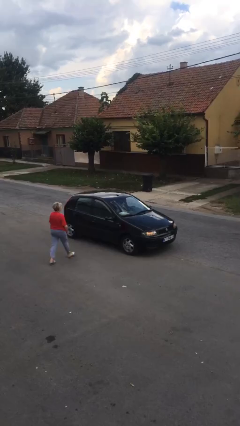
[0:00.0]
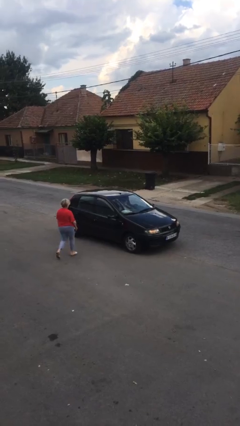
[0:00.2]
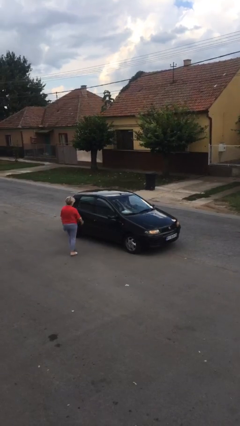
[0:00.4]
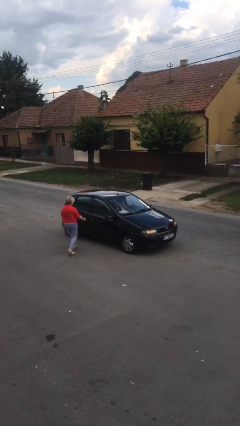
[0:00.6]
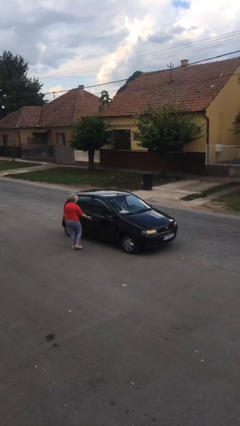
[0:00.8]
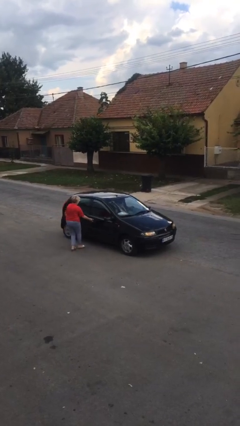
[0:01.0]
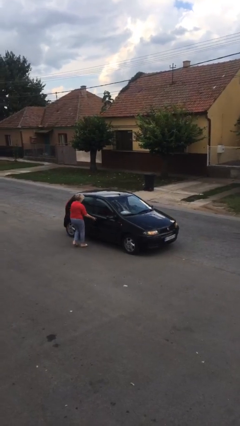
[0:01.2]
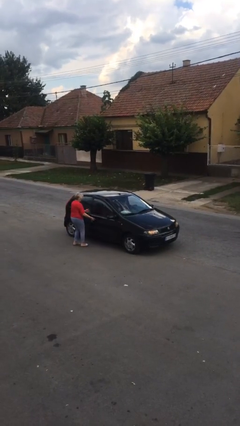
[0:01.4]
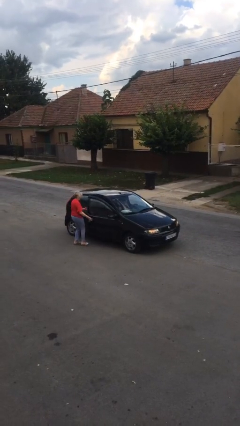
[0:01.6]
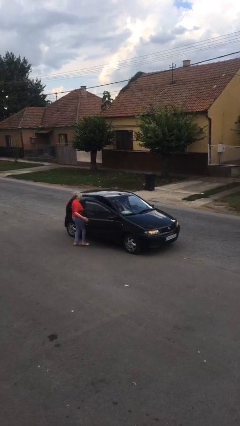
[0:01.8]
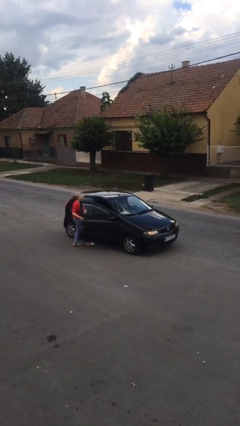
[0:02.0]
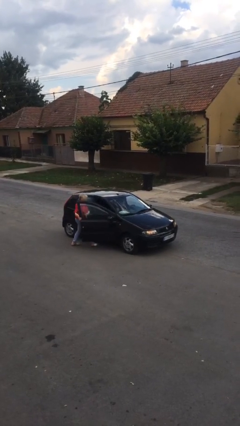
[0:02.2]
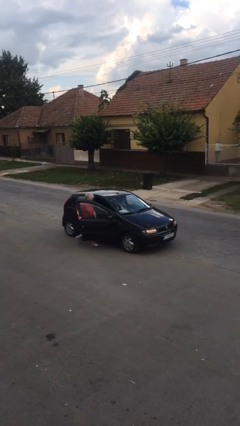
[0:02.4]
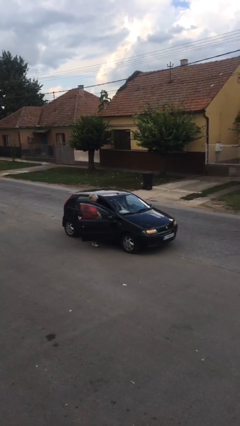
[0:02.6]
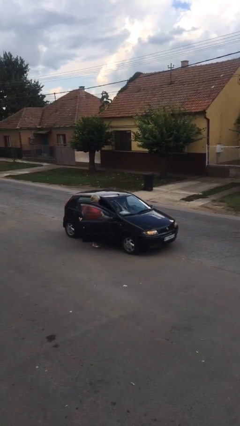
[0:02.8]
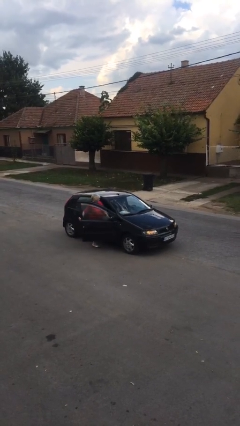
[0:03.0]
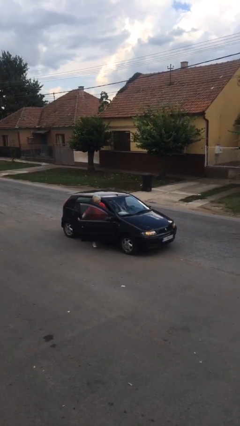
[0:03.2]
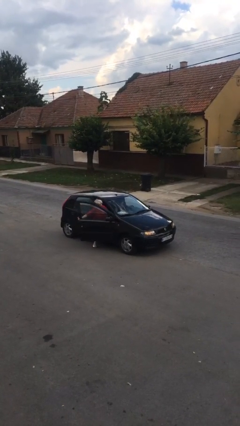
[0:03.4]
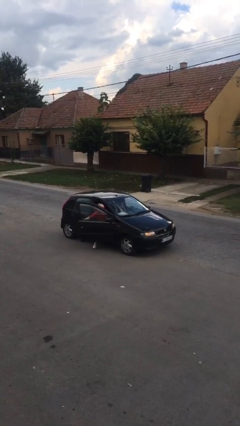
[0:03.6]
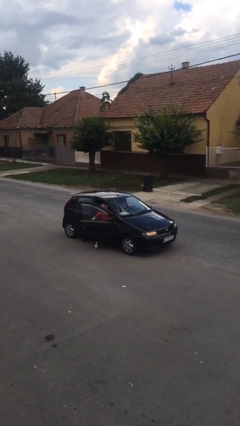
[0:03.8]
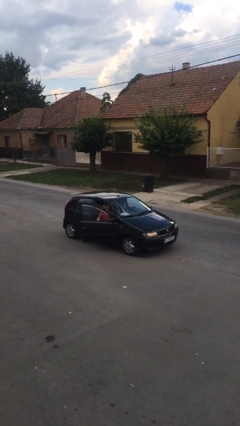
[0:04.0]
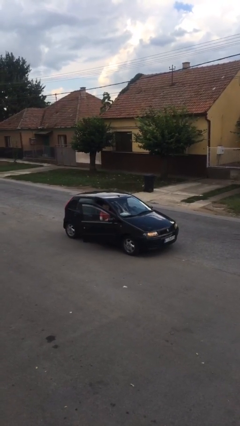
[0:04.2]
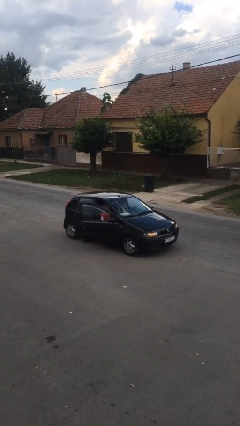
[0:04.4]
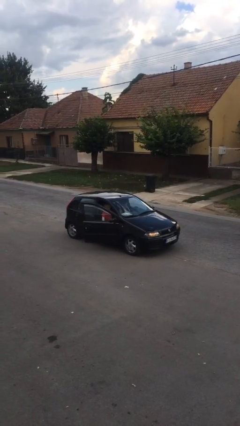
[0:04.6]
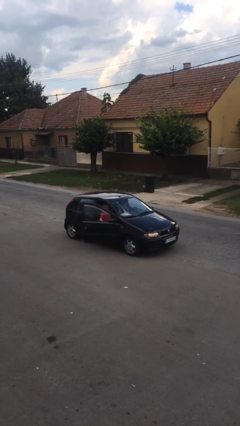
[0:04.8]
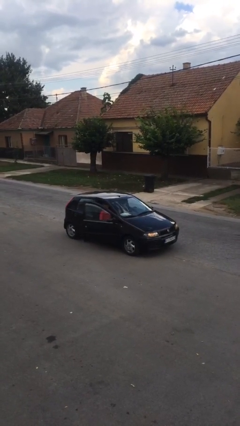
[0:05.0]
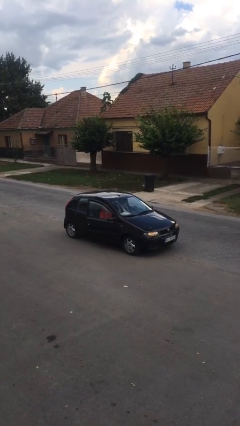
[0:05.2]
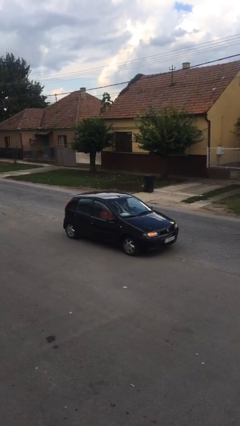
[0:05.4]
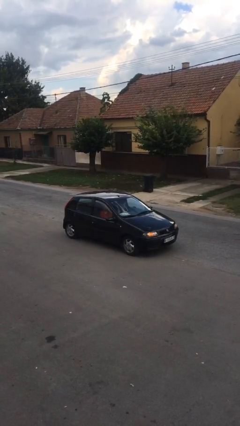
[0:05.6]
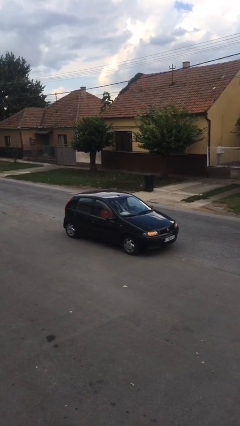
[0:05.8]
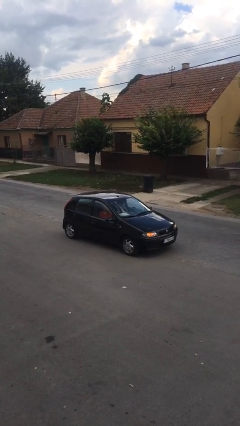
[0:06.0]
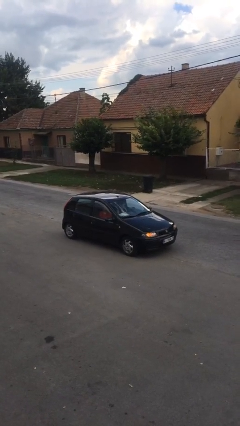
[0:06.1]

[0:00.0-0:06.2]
car picks up person

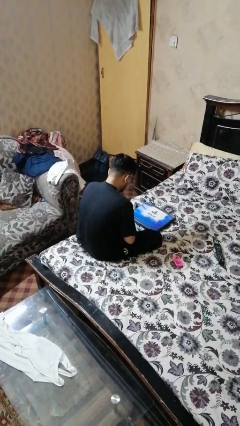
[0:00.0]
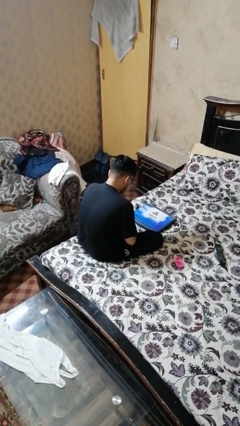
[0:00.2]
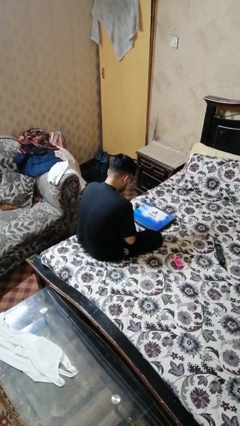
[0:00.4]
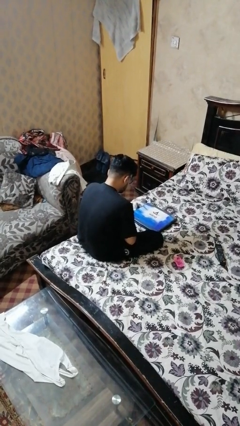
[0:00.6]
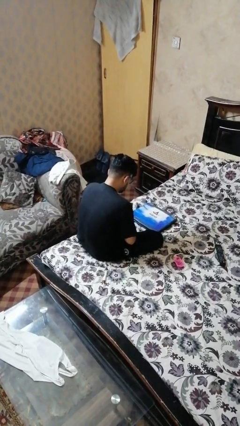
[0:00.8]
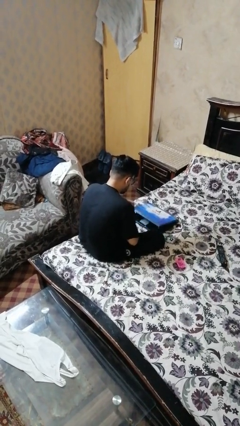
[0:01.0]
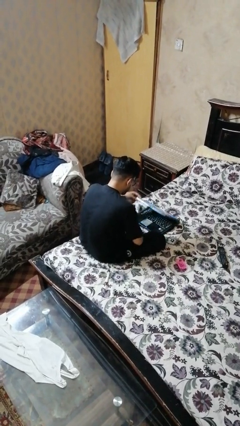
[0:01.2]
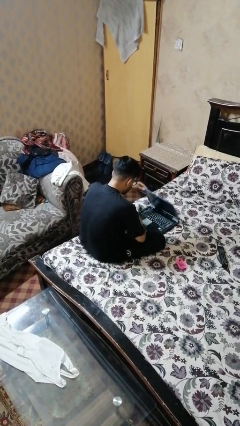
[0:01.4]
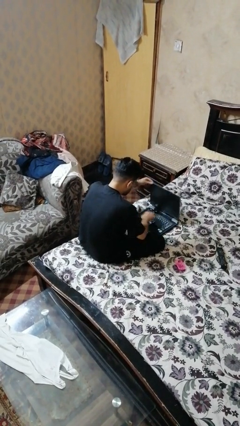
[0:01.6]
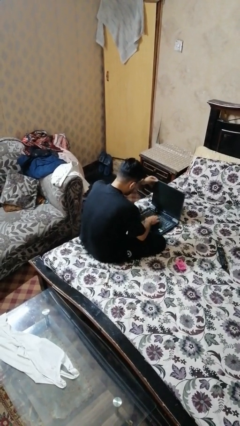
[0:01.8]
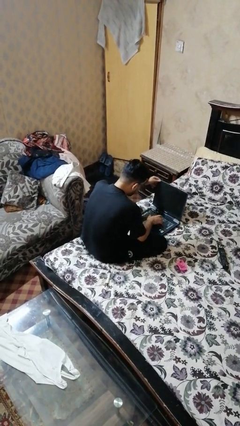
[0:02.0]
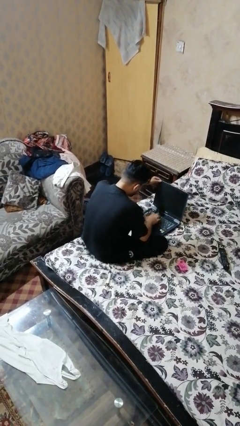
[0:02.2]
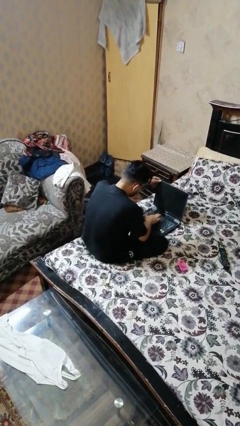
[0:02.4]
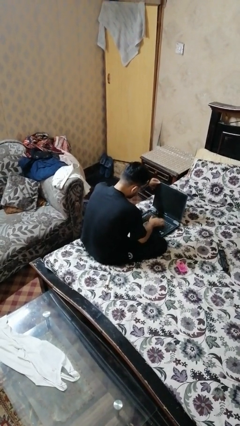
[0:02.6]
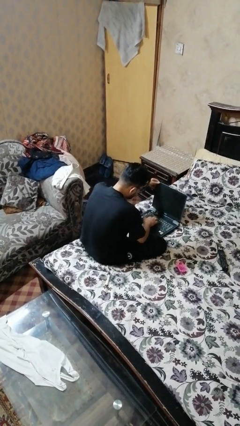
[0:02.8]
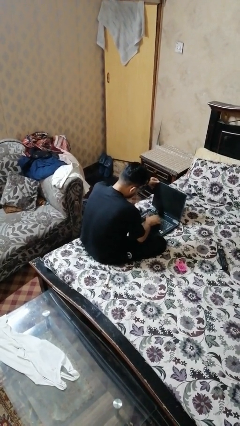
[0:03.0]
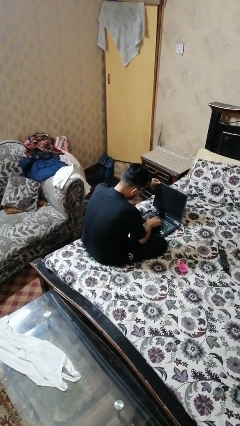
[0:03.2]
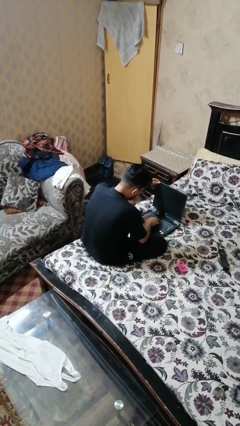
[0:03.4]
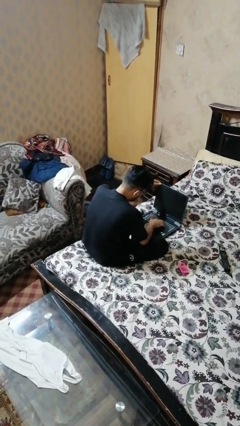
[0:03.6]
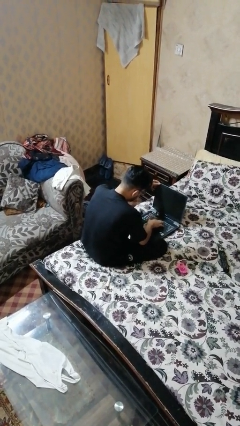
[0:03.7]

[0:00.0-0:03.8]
person opens laptop

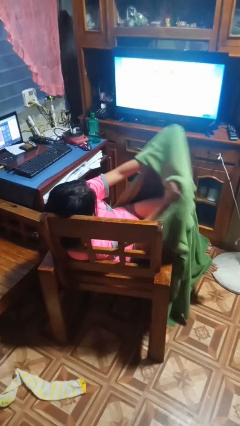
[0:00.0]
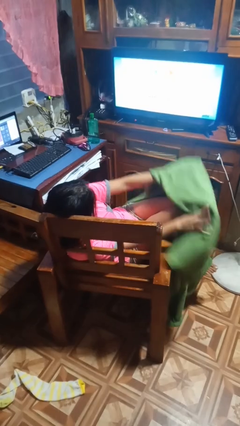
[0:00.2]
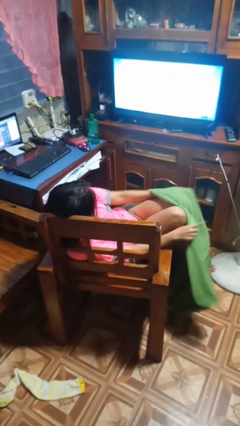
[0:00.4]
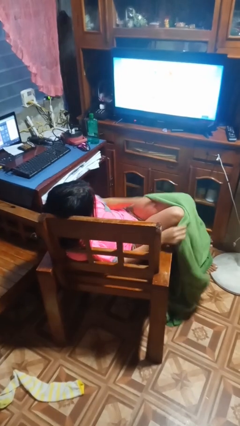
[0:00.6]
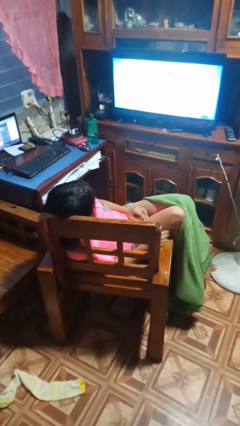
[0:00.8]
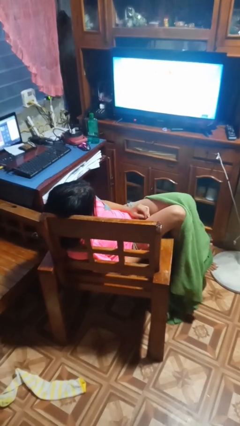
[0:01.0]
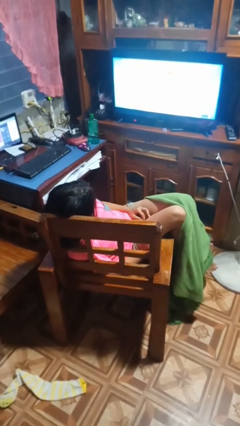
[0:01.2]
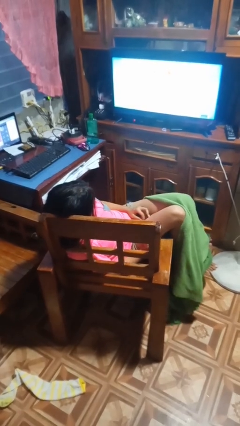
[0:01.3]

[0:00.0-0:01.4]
person uncovers with blanket

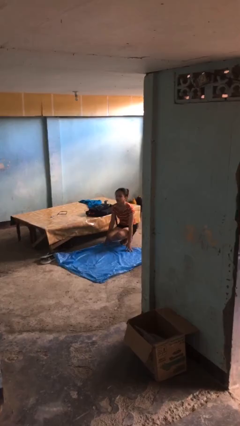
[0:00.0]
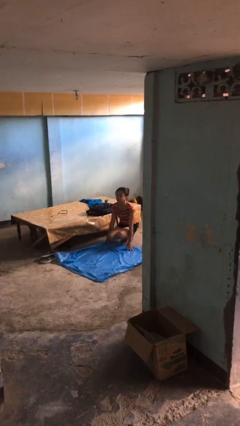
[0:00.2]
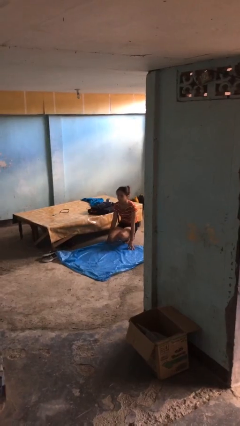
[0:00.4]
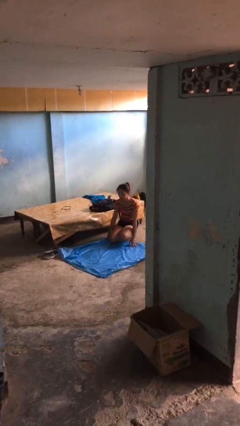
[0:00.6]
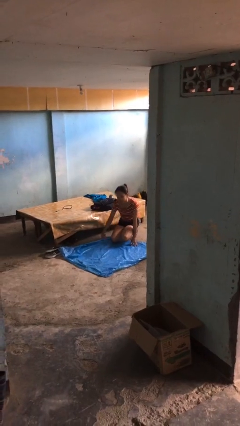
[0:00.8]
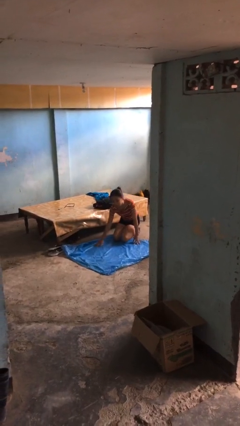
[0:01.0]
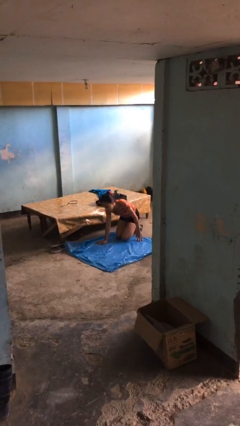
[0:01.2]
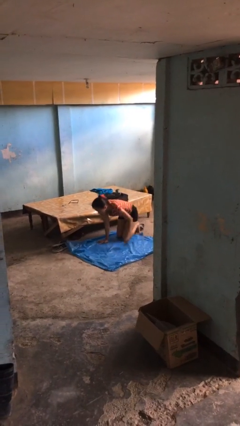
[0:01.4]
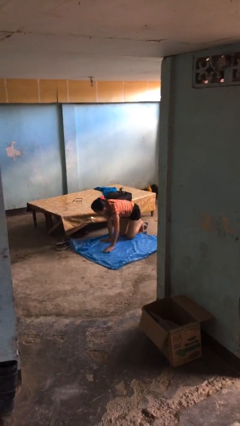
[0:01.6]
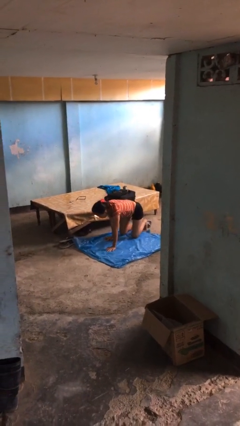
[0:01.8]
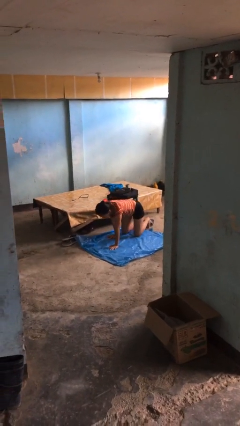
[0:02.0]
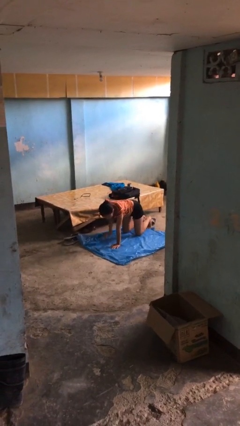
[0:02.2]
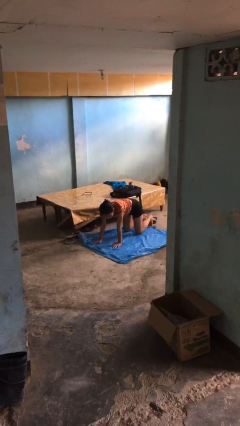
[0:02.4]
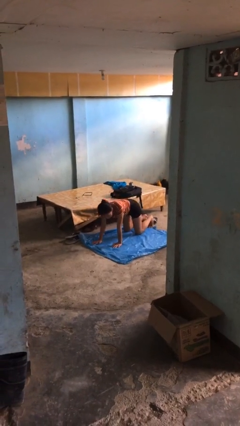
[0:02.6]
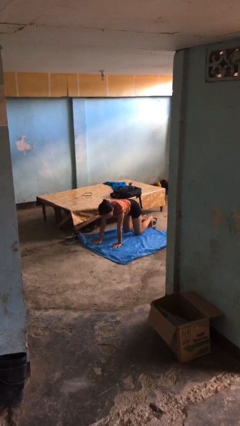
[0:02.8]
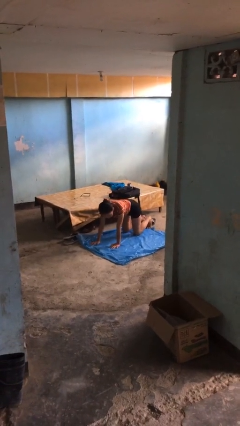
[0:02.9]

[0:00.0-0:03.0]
person crawls

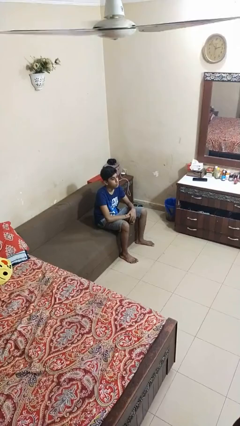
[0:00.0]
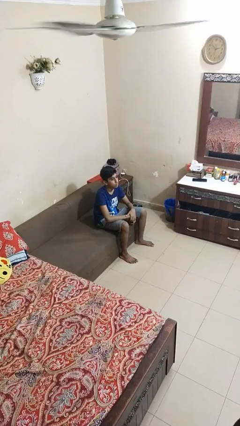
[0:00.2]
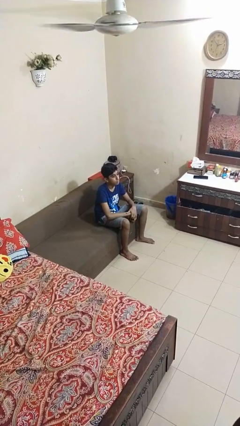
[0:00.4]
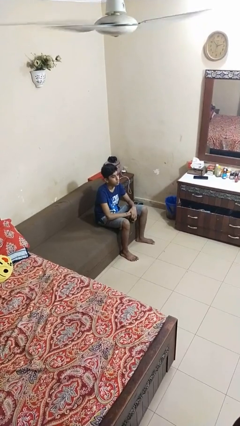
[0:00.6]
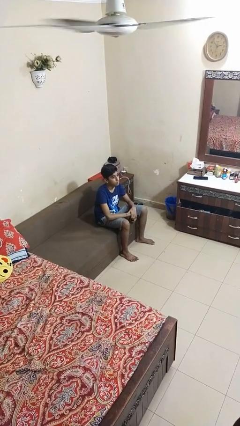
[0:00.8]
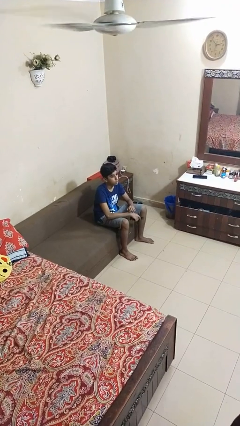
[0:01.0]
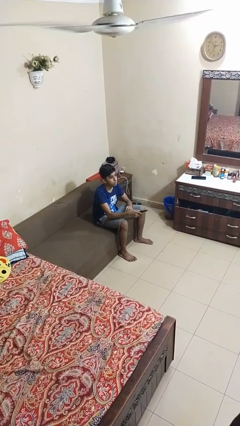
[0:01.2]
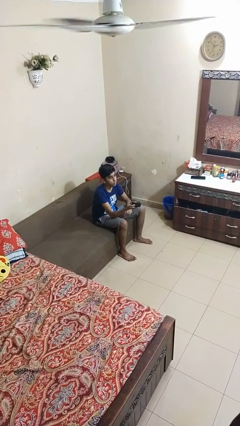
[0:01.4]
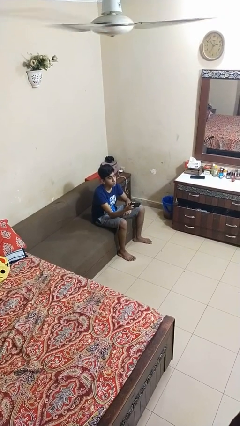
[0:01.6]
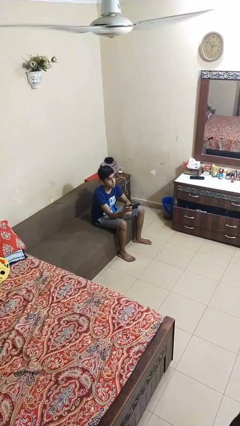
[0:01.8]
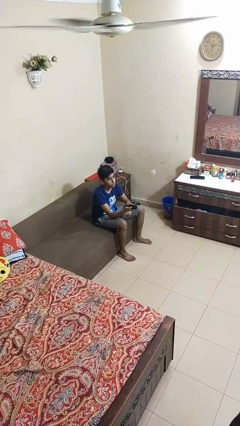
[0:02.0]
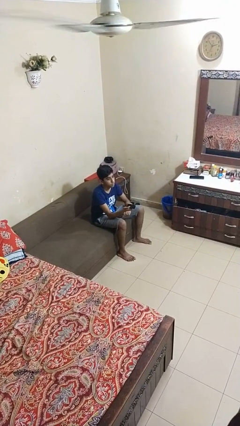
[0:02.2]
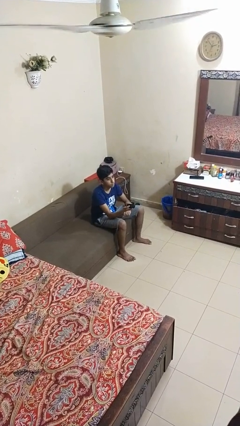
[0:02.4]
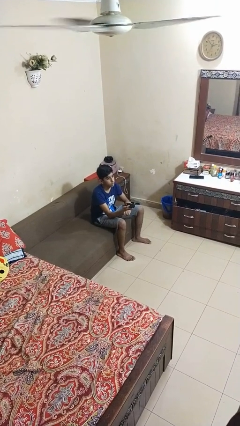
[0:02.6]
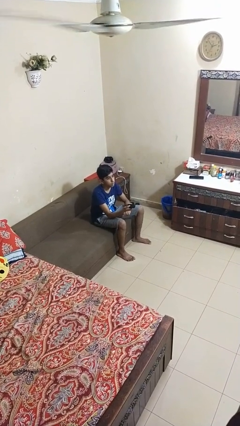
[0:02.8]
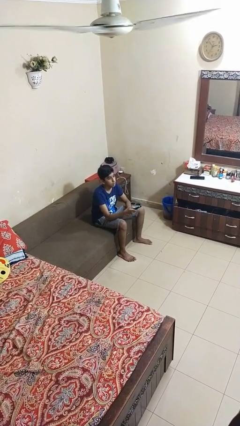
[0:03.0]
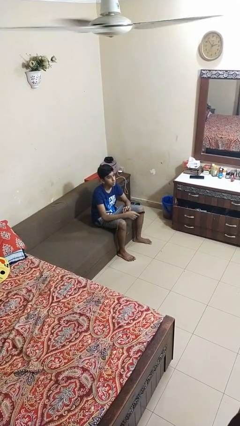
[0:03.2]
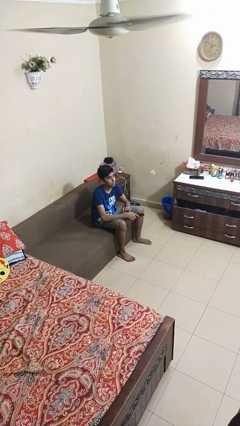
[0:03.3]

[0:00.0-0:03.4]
person uses television remote
